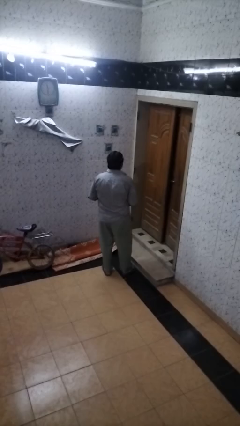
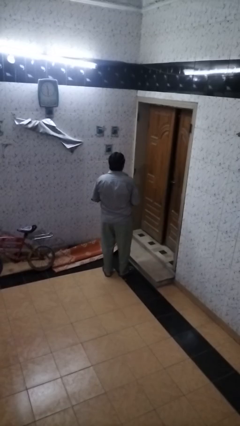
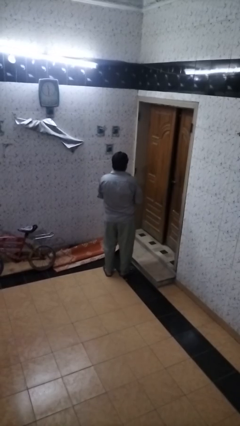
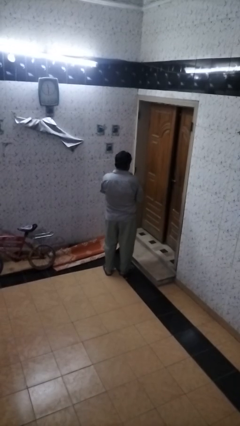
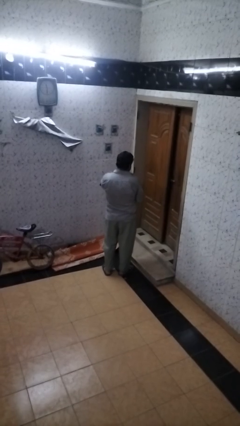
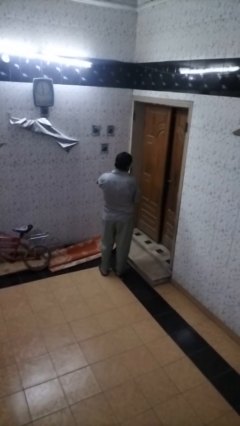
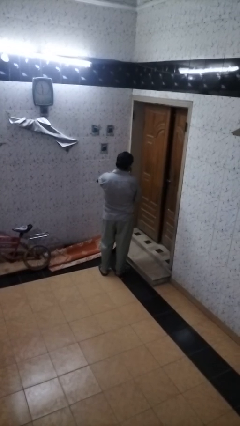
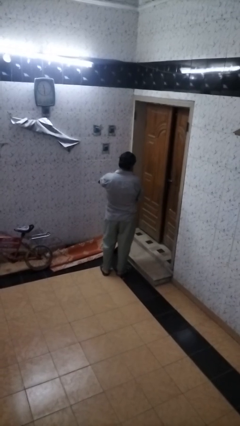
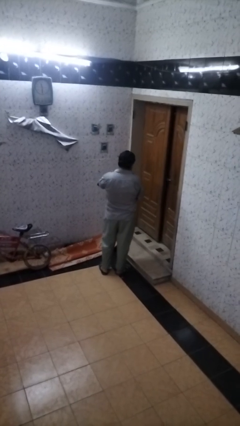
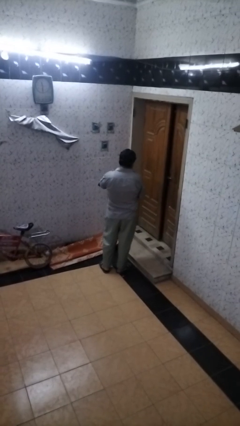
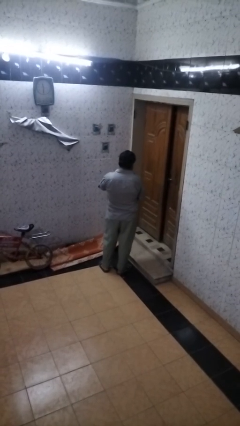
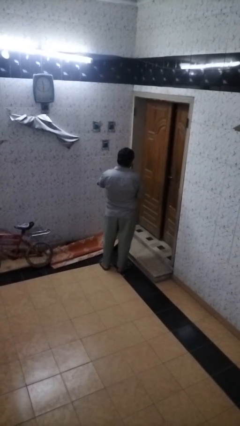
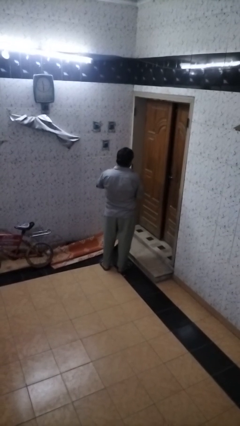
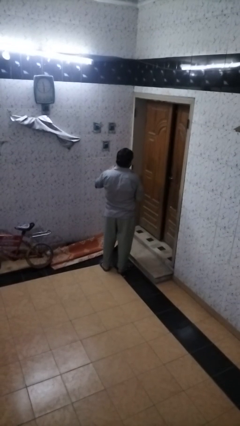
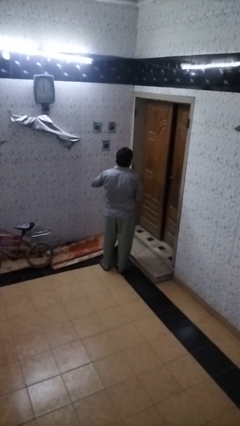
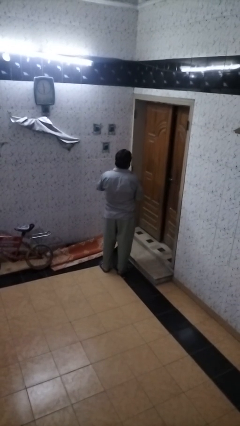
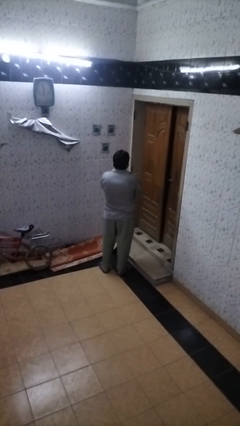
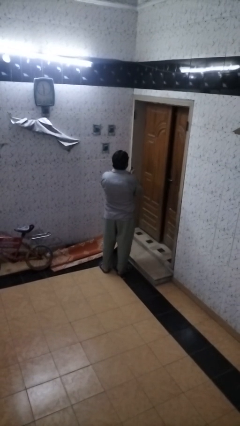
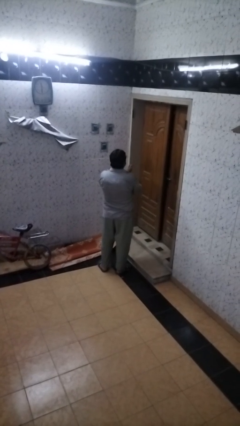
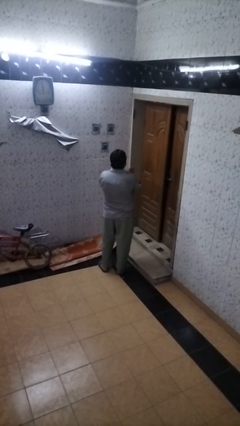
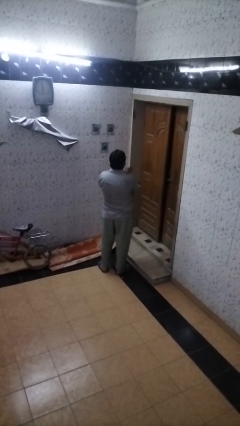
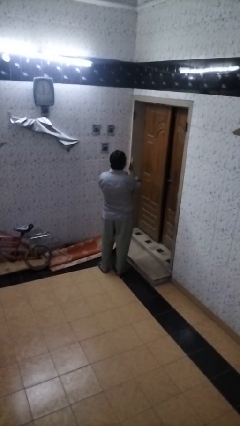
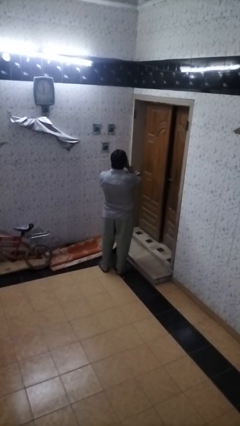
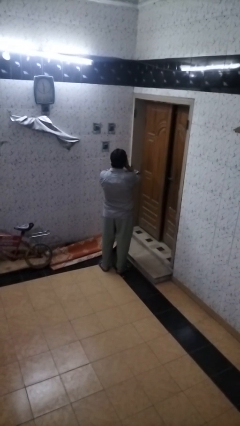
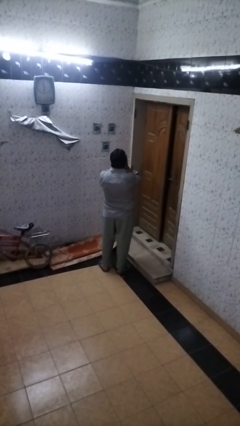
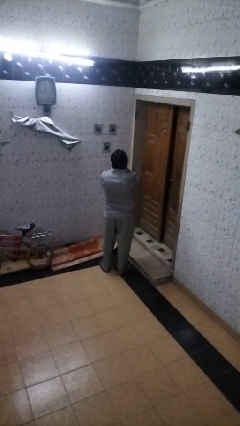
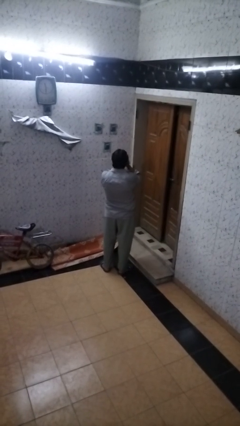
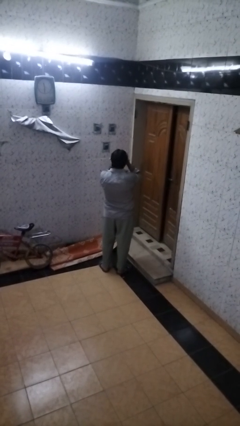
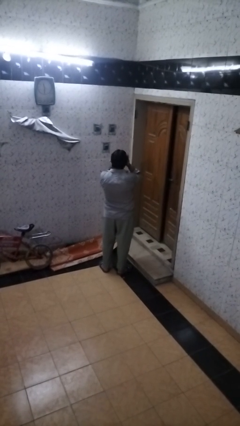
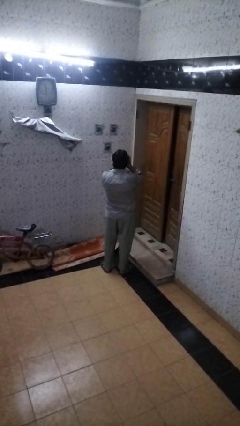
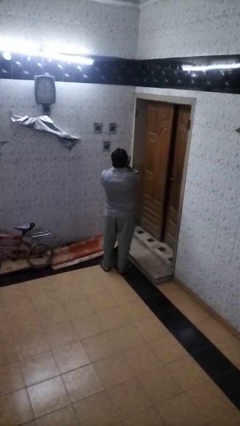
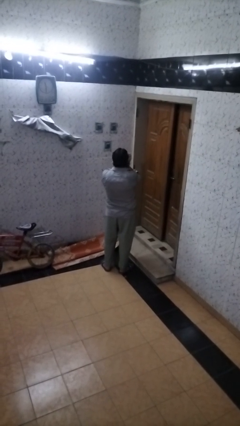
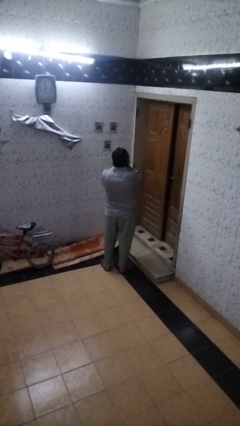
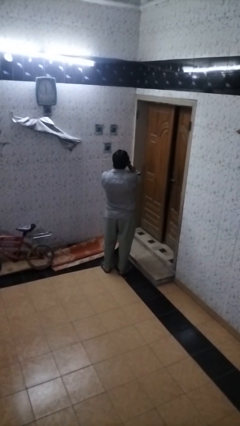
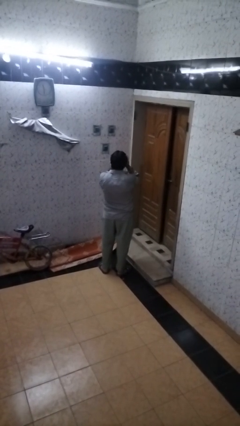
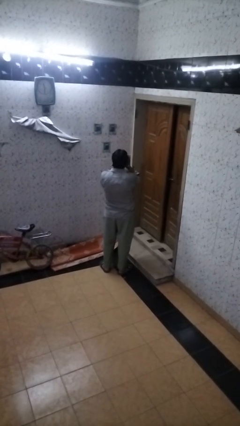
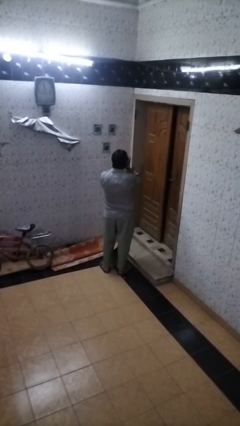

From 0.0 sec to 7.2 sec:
person applies facial moisturizer

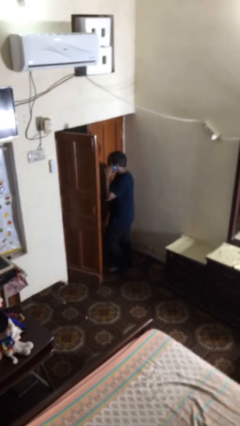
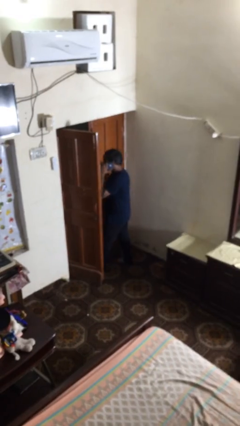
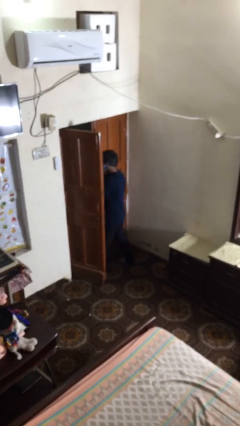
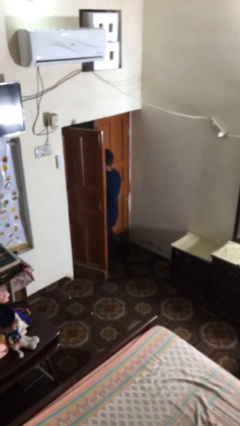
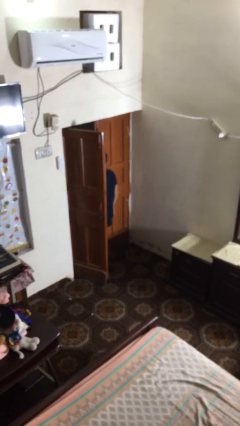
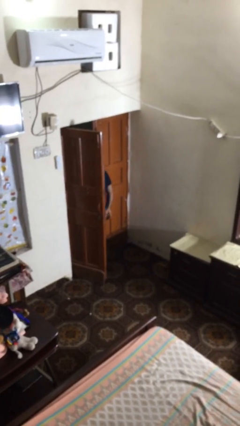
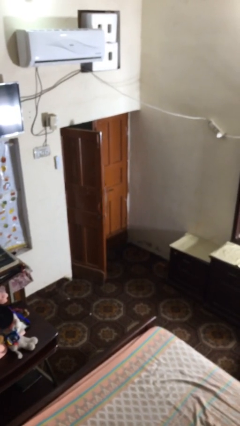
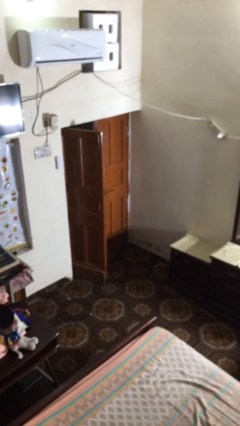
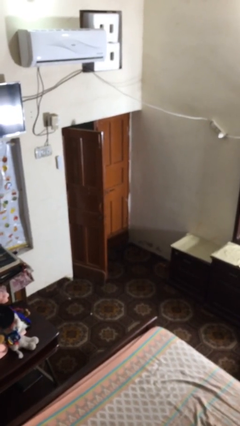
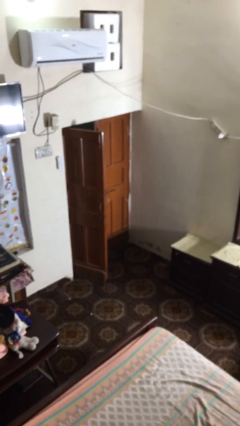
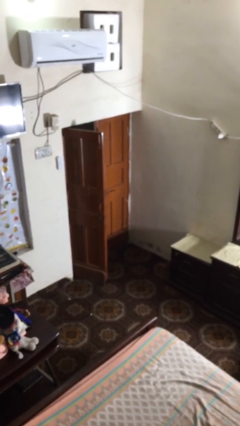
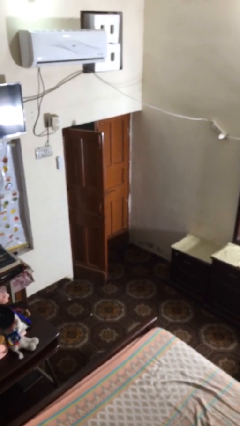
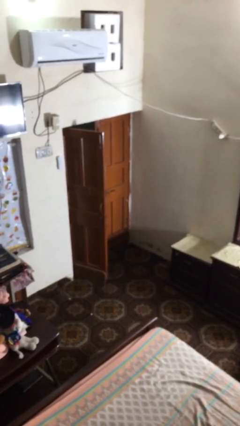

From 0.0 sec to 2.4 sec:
person exits scene through structure

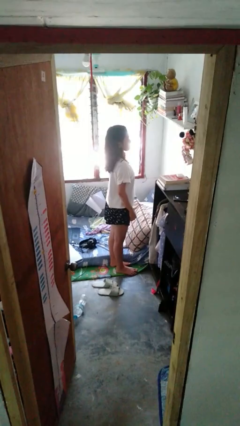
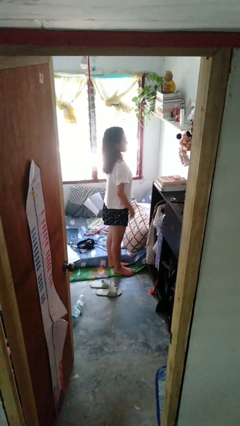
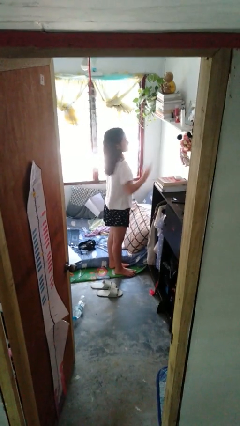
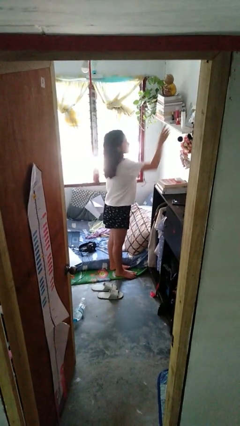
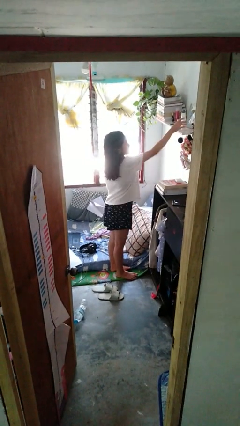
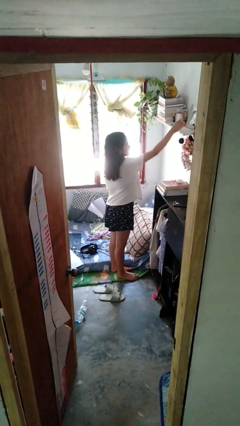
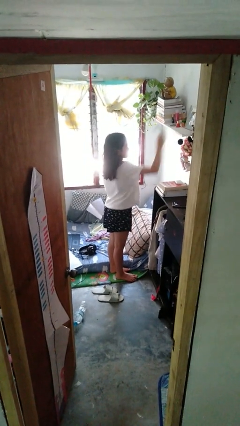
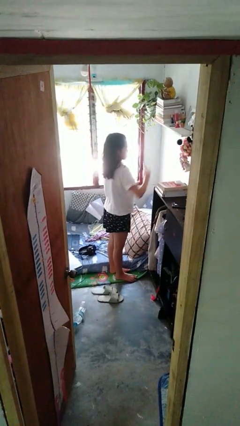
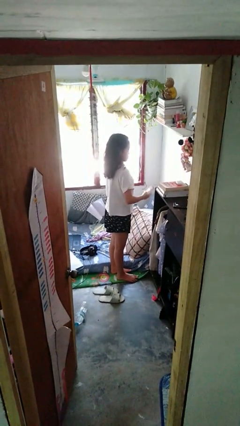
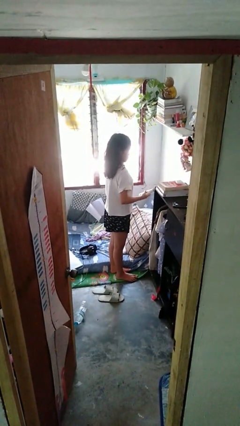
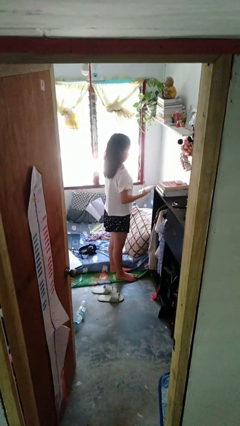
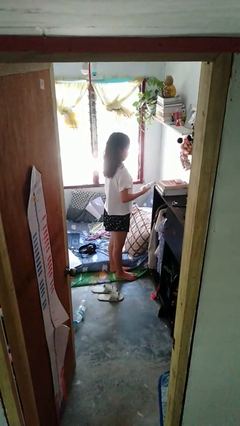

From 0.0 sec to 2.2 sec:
person picks up object from shelf

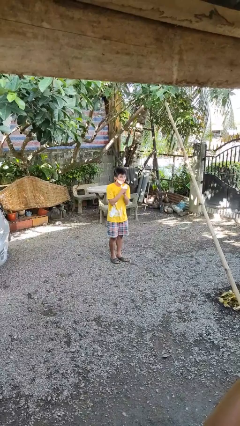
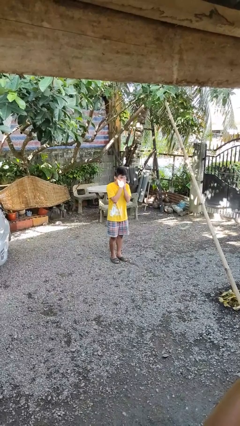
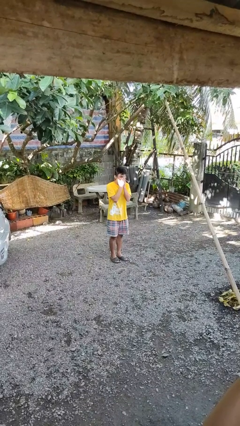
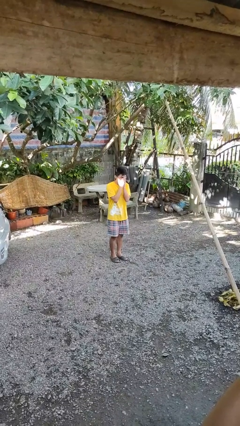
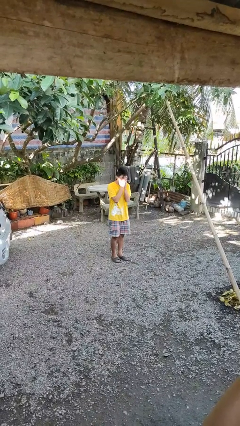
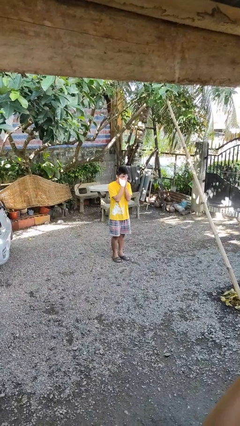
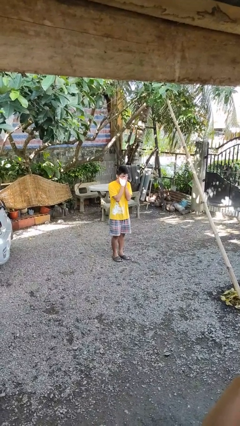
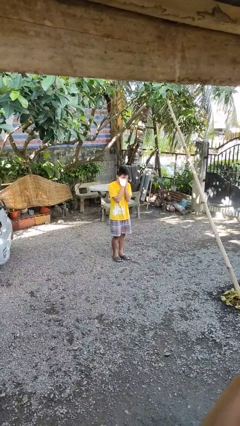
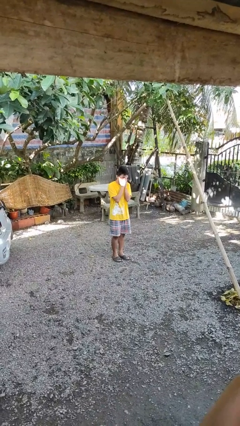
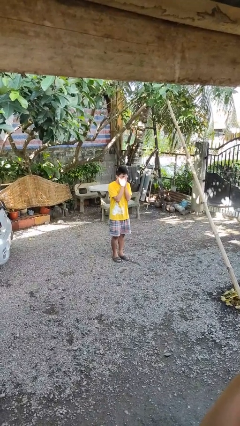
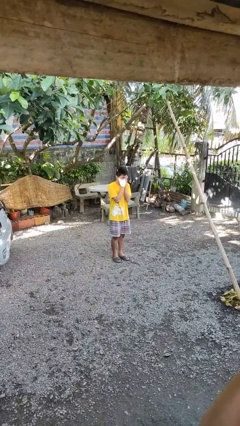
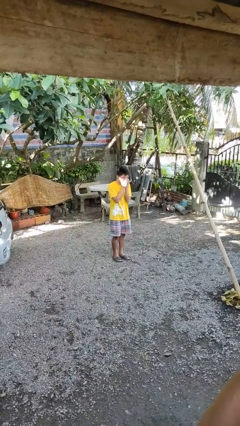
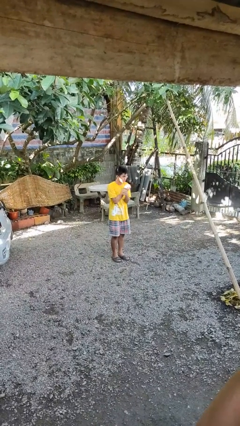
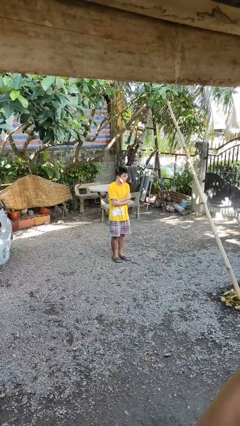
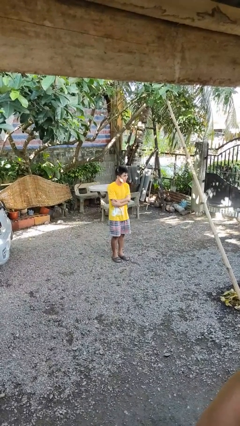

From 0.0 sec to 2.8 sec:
person blows into hands

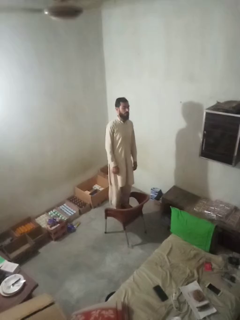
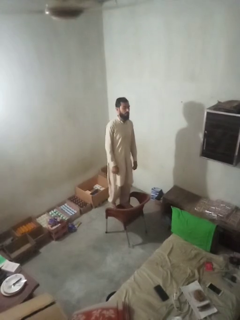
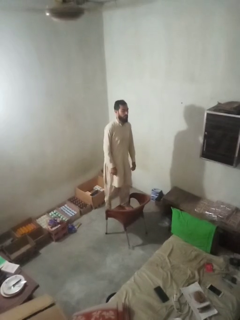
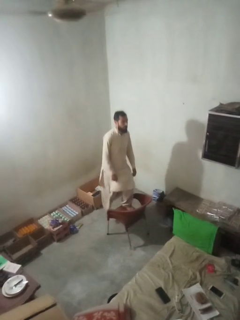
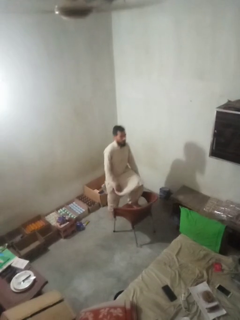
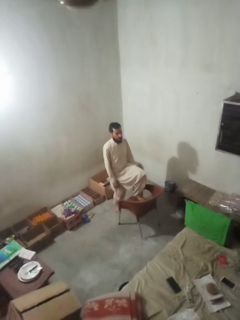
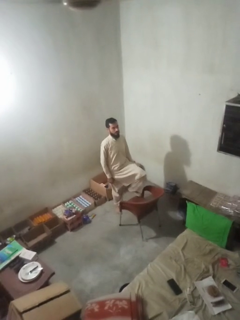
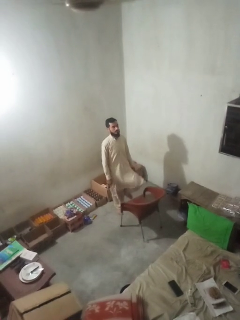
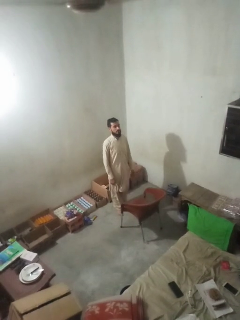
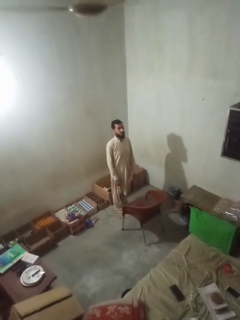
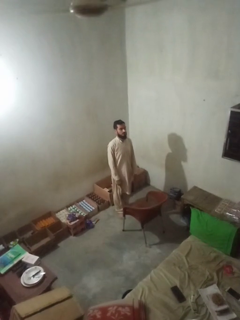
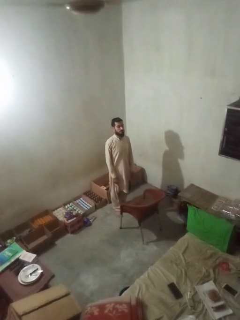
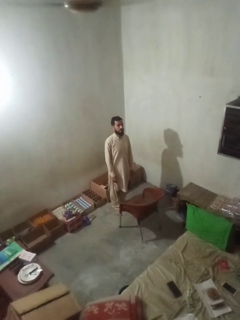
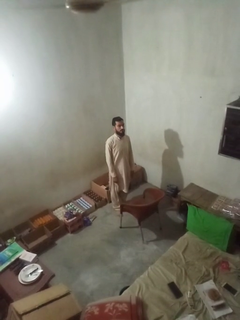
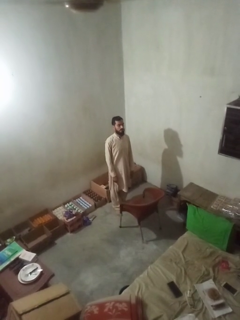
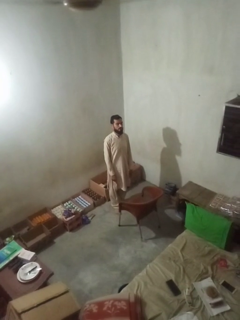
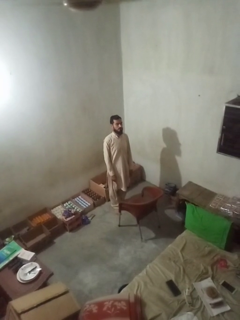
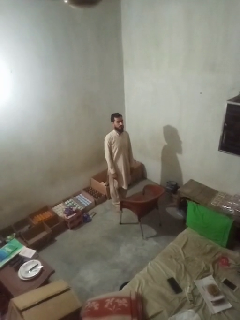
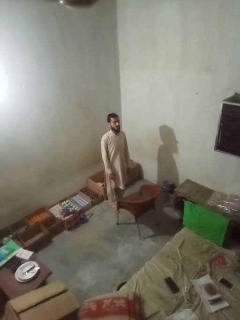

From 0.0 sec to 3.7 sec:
person climbs off chair
